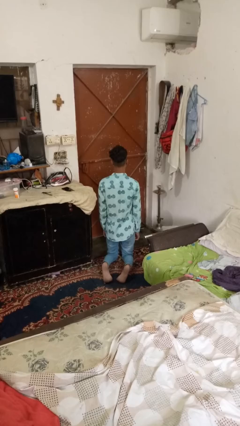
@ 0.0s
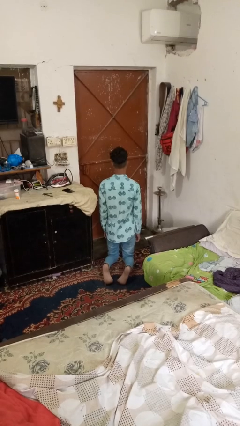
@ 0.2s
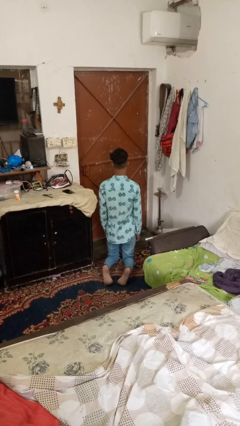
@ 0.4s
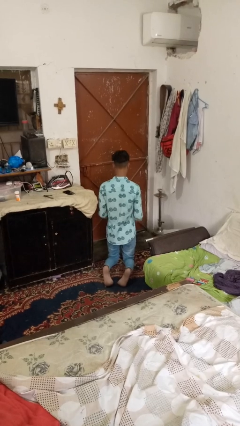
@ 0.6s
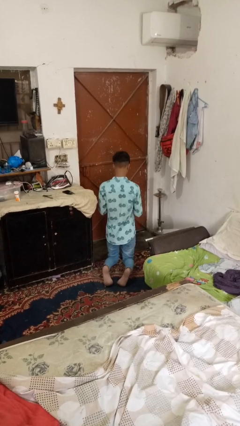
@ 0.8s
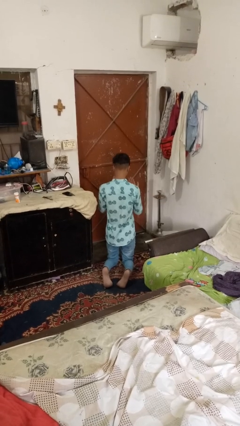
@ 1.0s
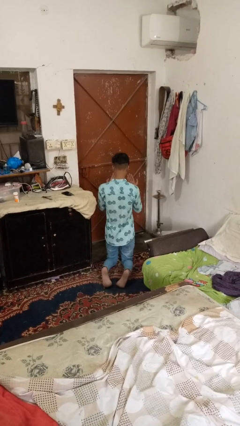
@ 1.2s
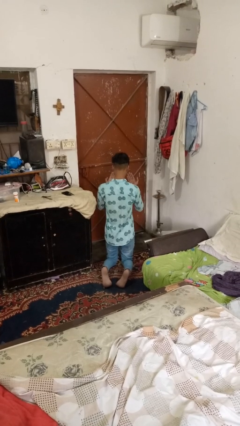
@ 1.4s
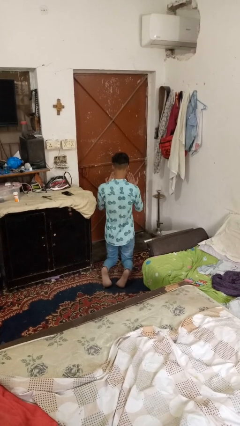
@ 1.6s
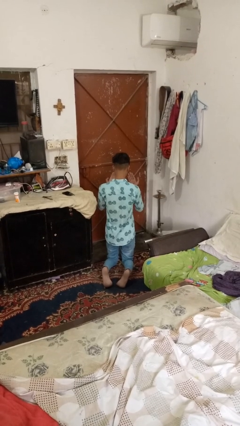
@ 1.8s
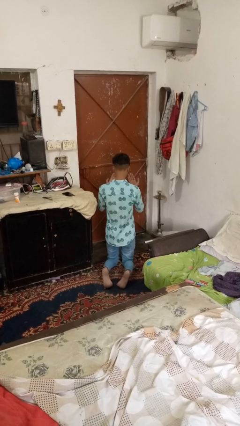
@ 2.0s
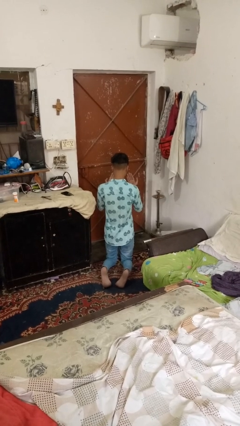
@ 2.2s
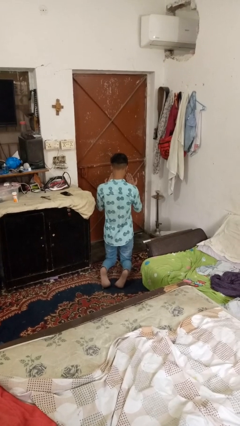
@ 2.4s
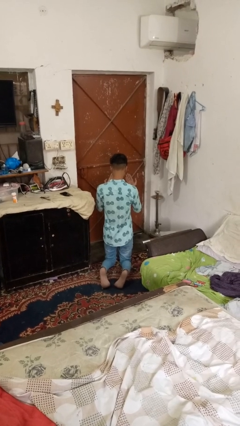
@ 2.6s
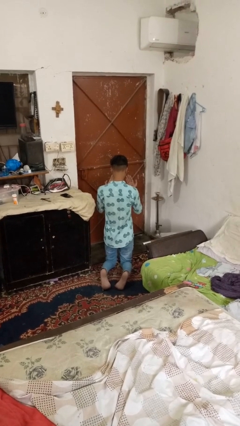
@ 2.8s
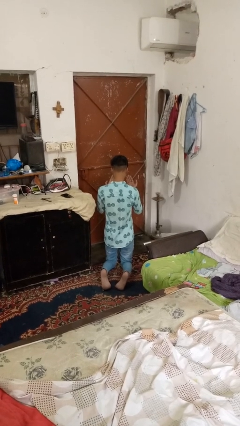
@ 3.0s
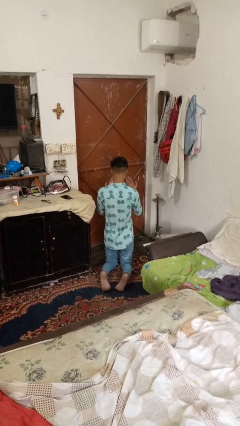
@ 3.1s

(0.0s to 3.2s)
person prays

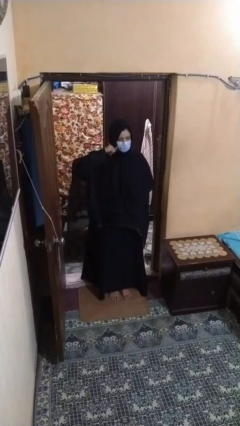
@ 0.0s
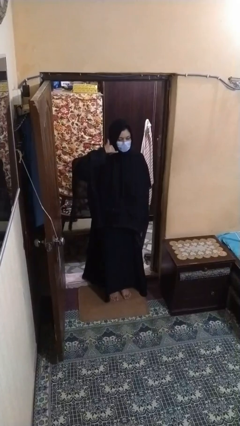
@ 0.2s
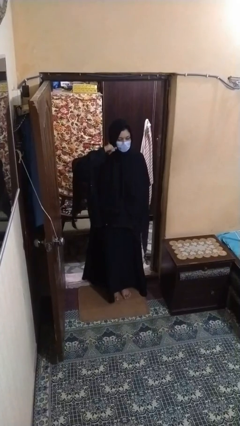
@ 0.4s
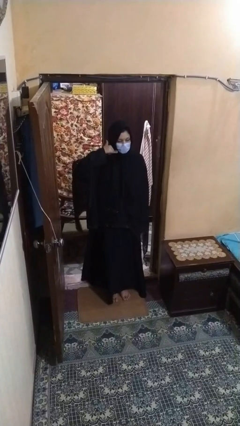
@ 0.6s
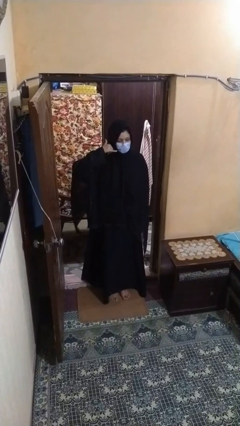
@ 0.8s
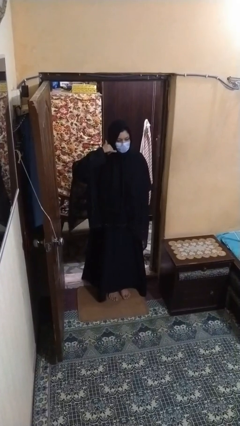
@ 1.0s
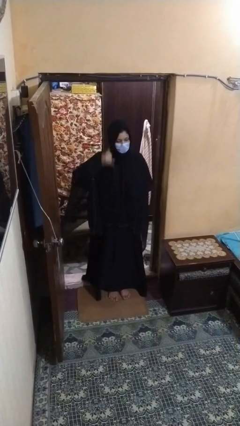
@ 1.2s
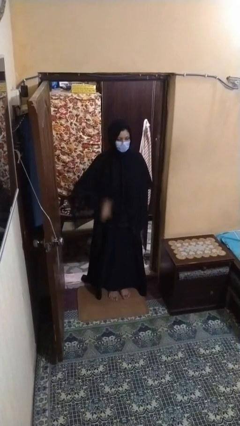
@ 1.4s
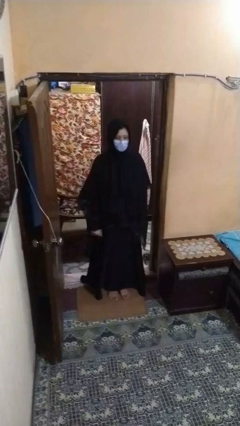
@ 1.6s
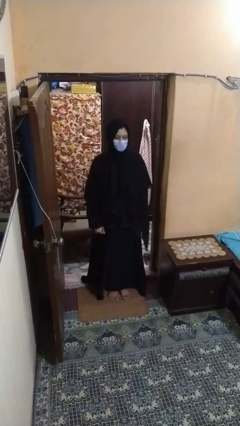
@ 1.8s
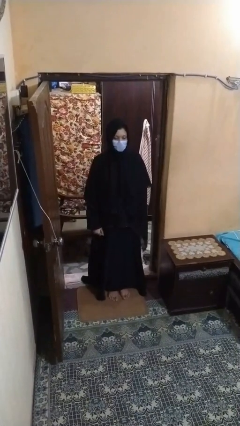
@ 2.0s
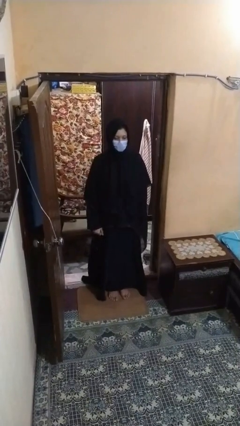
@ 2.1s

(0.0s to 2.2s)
person gestures call me

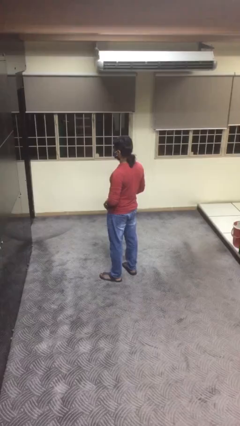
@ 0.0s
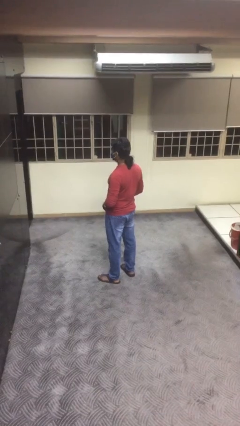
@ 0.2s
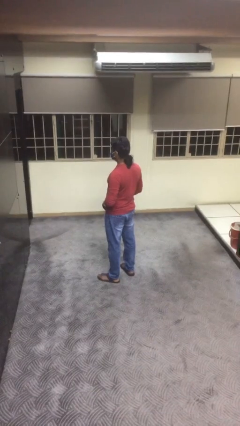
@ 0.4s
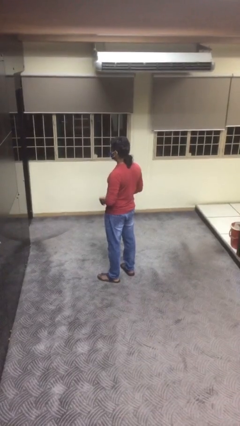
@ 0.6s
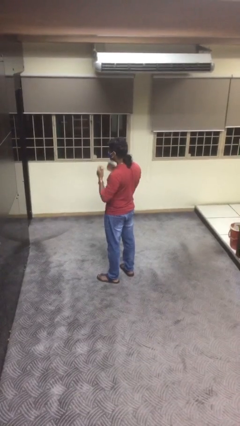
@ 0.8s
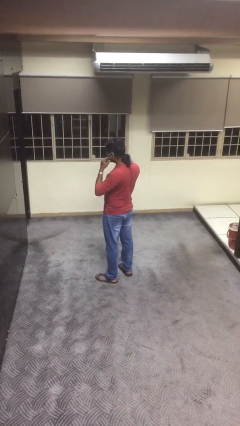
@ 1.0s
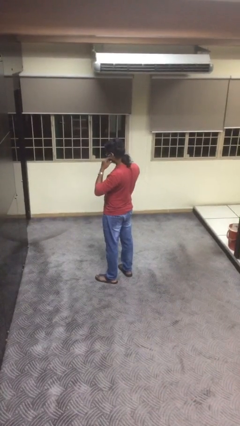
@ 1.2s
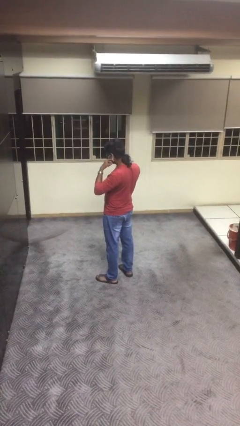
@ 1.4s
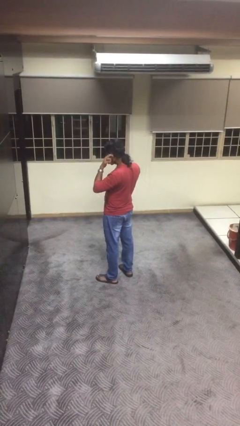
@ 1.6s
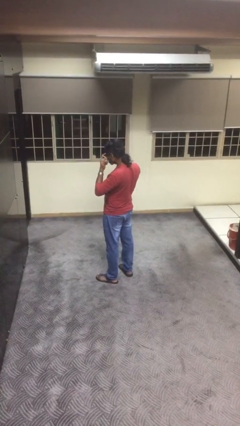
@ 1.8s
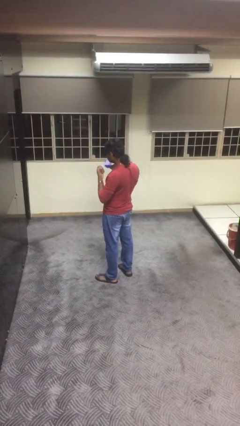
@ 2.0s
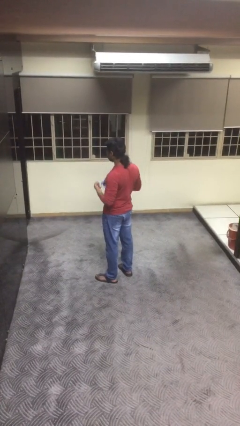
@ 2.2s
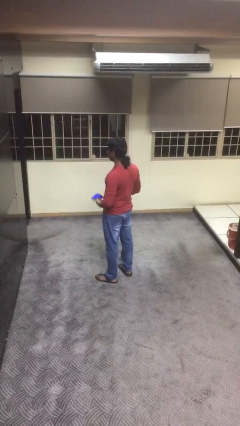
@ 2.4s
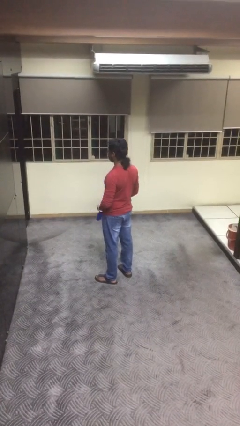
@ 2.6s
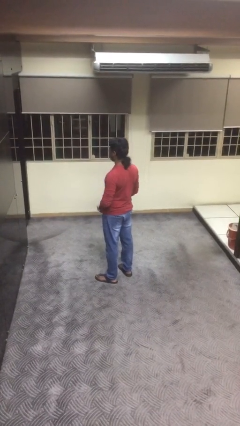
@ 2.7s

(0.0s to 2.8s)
person takes off facemask

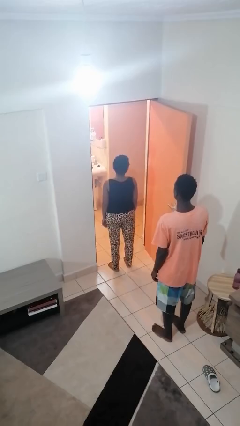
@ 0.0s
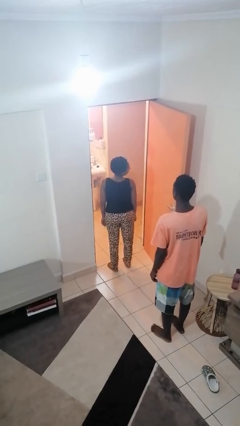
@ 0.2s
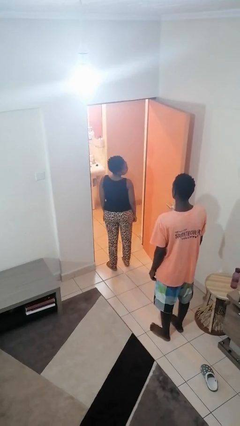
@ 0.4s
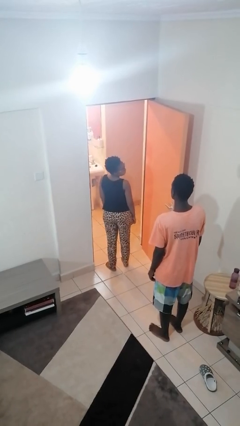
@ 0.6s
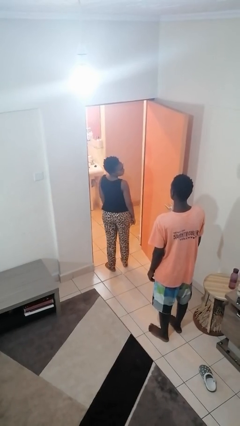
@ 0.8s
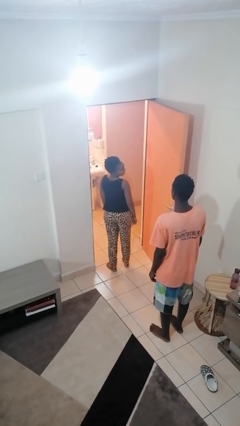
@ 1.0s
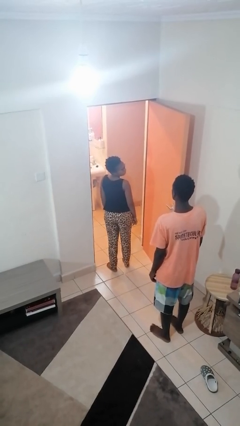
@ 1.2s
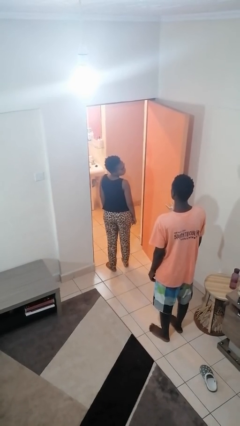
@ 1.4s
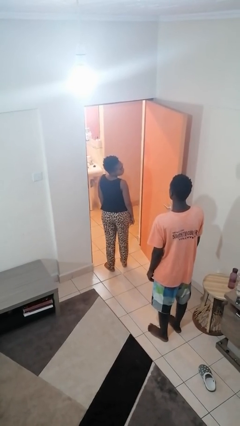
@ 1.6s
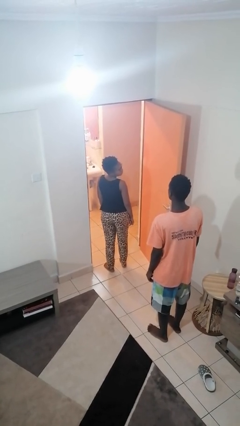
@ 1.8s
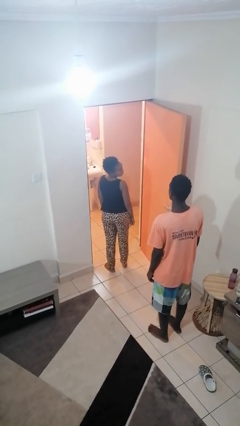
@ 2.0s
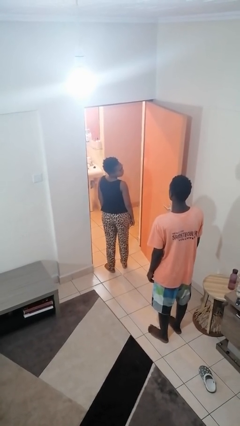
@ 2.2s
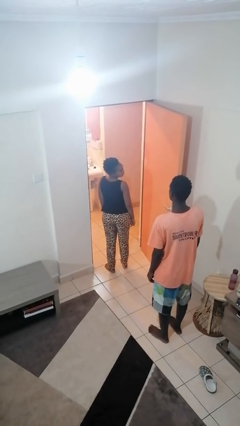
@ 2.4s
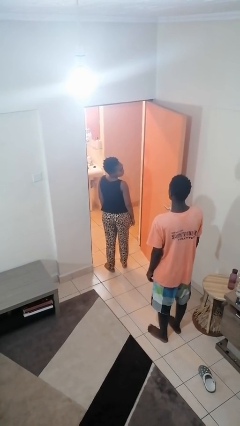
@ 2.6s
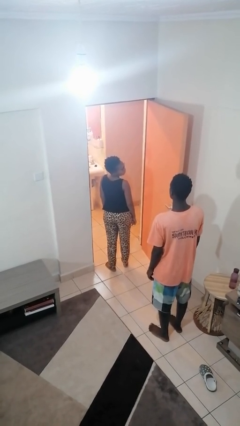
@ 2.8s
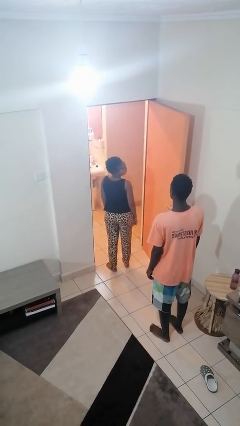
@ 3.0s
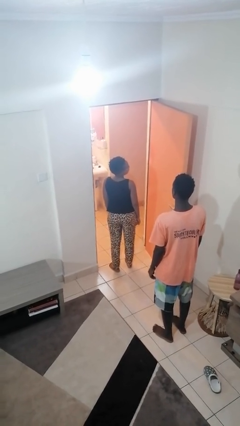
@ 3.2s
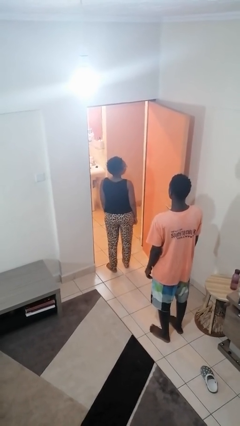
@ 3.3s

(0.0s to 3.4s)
person looks over shoulder

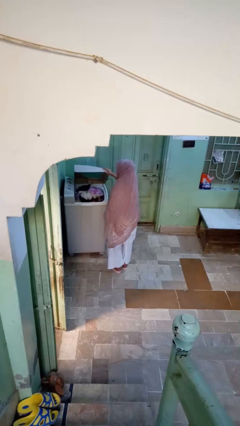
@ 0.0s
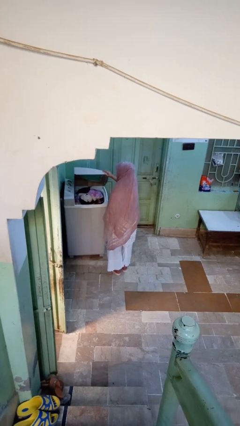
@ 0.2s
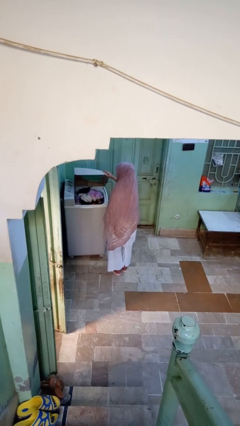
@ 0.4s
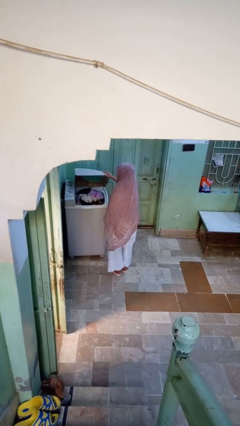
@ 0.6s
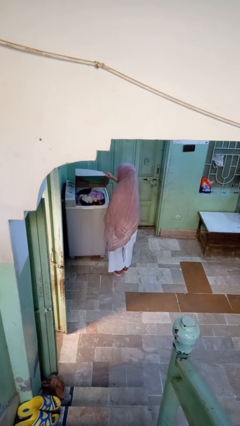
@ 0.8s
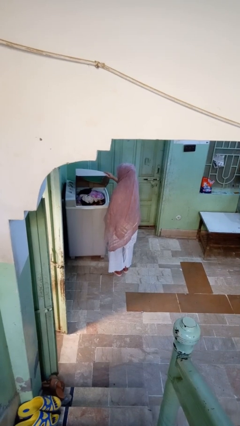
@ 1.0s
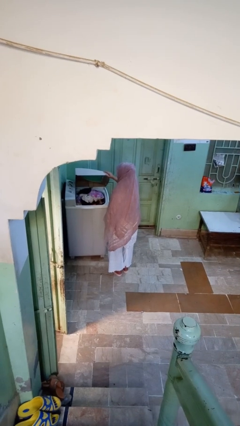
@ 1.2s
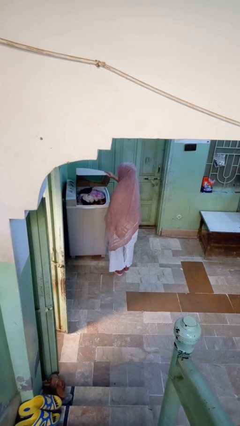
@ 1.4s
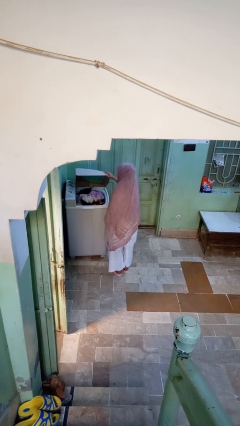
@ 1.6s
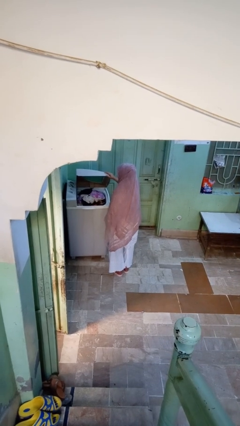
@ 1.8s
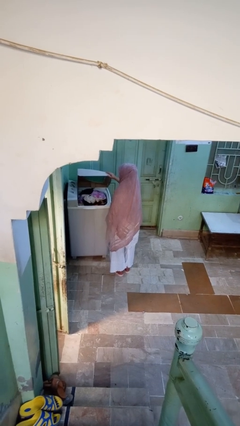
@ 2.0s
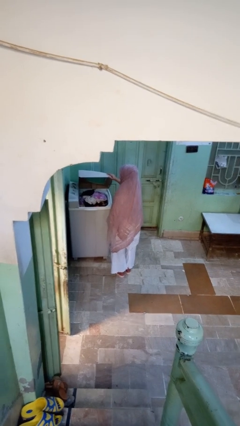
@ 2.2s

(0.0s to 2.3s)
person opens clothes washer

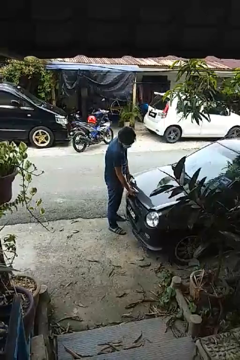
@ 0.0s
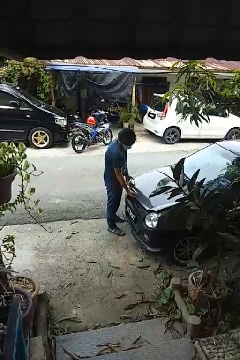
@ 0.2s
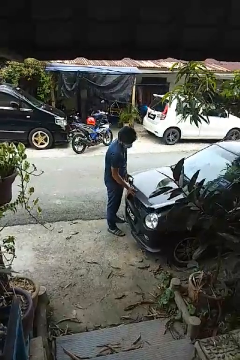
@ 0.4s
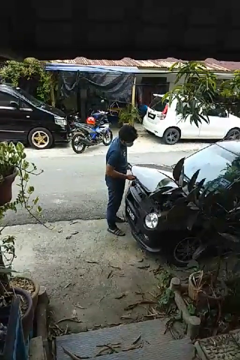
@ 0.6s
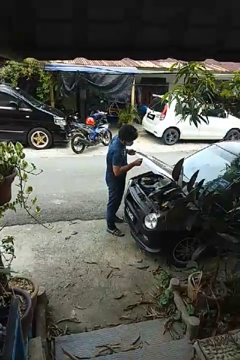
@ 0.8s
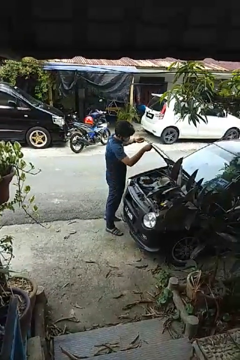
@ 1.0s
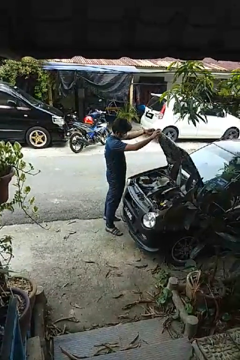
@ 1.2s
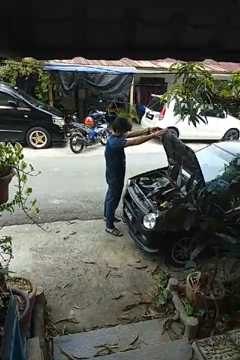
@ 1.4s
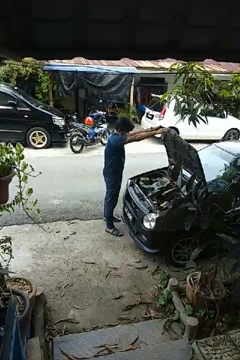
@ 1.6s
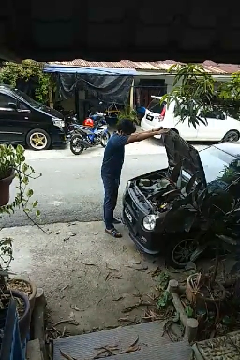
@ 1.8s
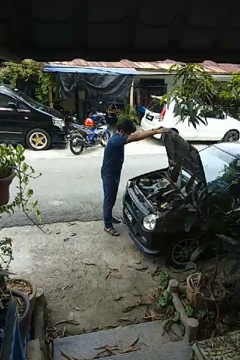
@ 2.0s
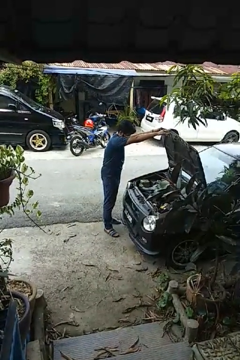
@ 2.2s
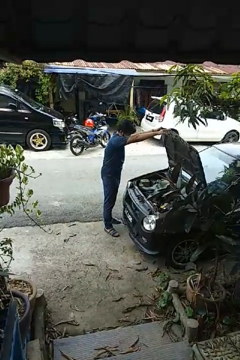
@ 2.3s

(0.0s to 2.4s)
person opens car hood

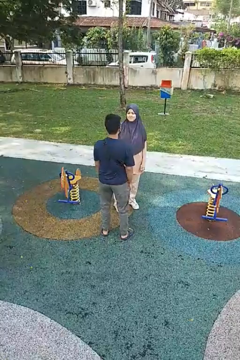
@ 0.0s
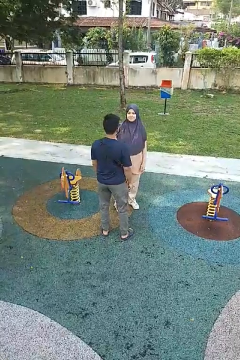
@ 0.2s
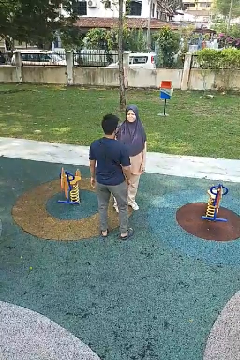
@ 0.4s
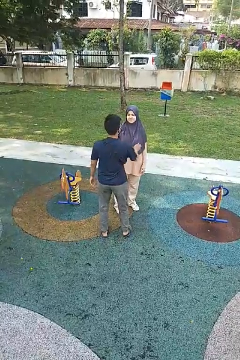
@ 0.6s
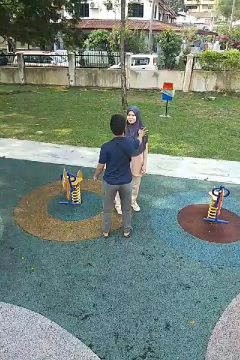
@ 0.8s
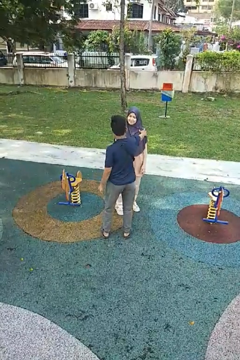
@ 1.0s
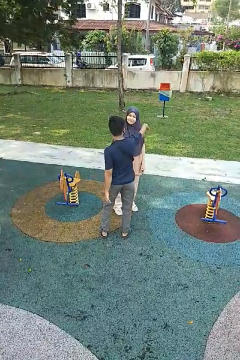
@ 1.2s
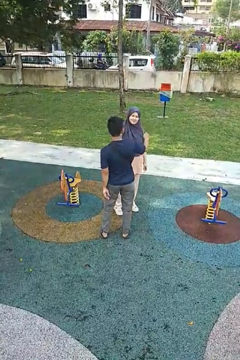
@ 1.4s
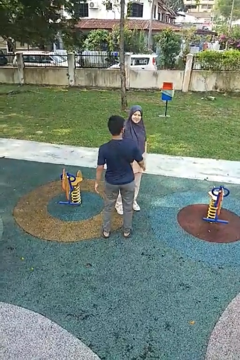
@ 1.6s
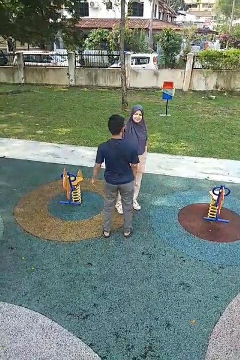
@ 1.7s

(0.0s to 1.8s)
person shoves person
